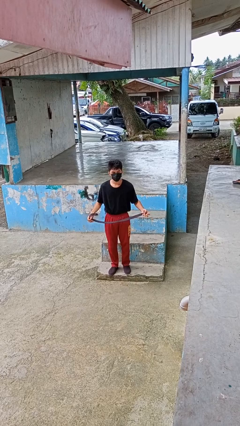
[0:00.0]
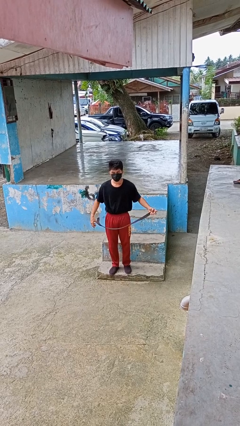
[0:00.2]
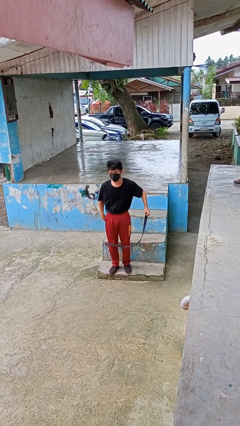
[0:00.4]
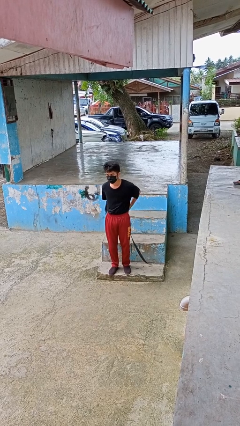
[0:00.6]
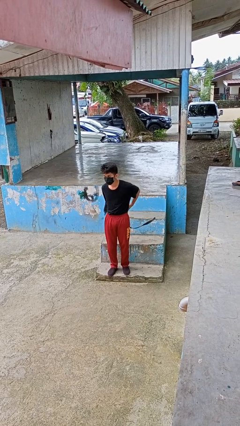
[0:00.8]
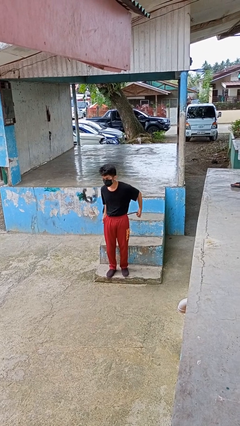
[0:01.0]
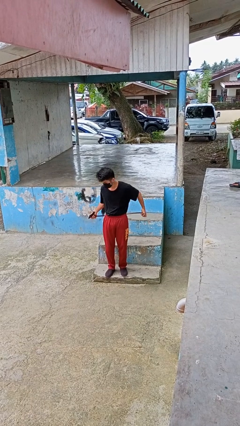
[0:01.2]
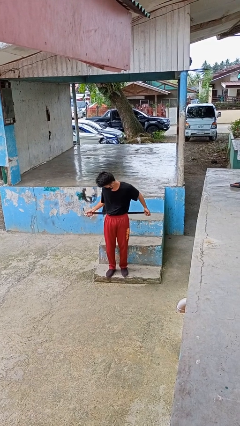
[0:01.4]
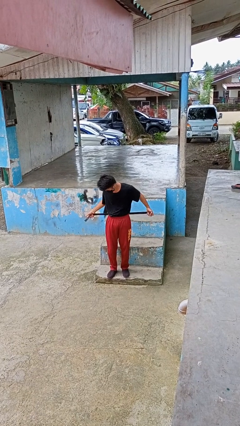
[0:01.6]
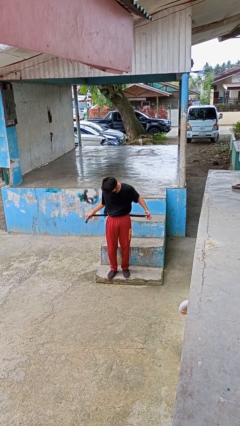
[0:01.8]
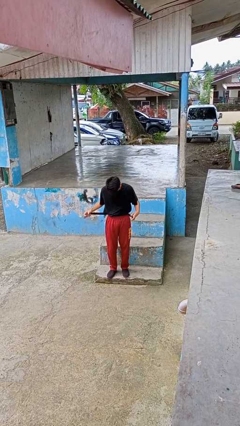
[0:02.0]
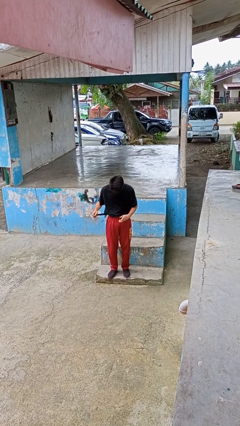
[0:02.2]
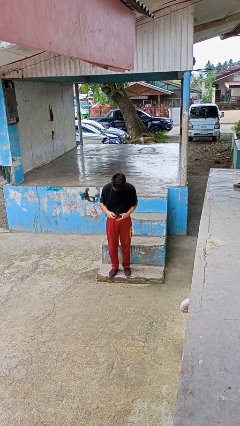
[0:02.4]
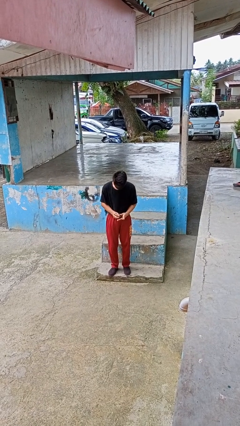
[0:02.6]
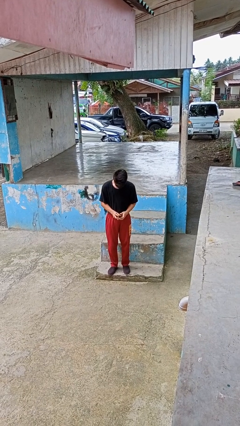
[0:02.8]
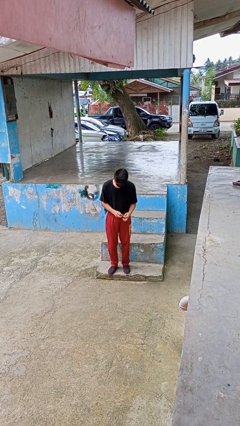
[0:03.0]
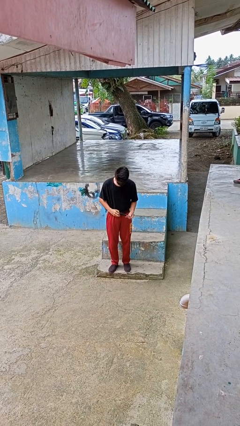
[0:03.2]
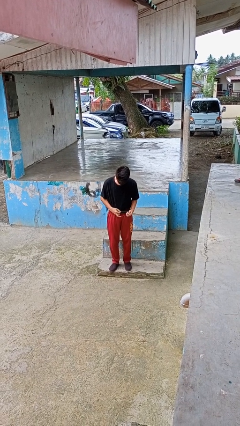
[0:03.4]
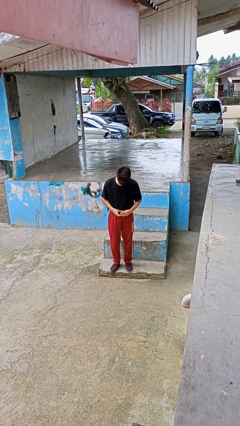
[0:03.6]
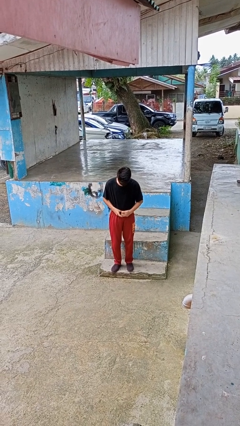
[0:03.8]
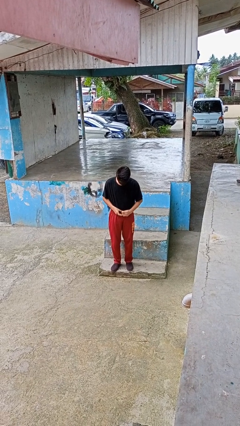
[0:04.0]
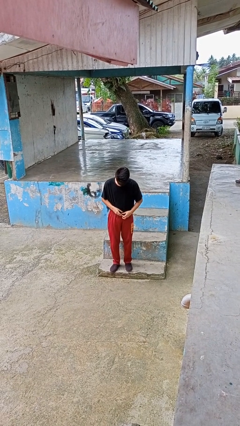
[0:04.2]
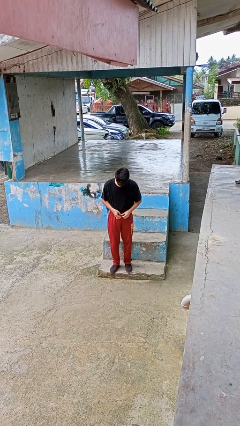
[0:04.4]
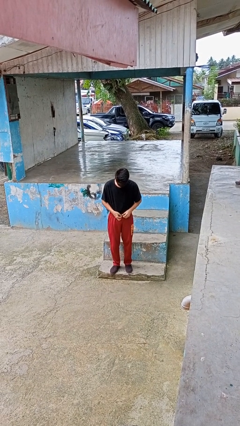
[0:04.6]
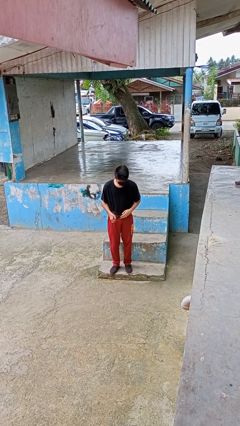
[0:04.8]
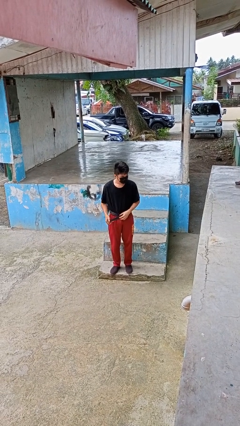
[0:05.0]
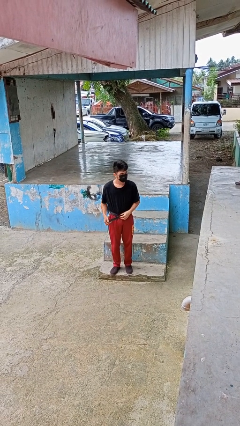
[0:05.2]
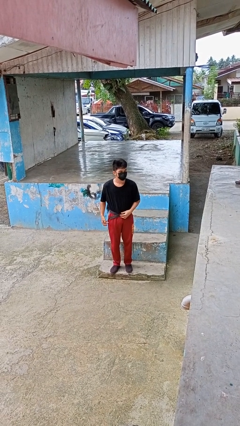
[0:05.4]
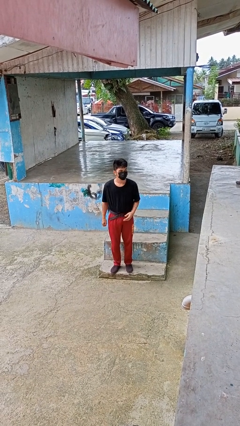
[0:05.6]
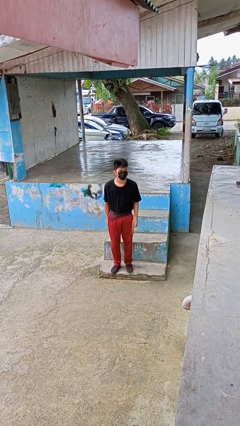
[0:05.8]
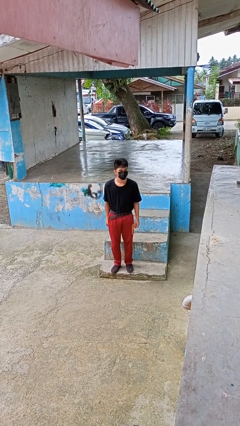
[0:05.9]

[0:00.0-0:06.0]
person puts on belt

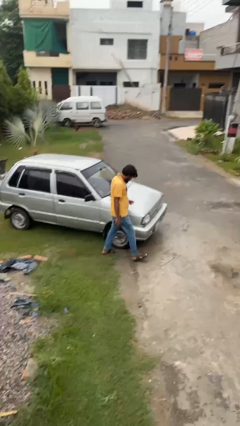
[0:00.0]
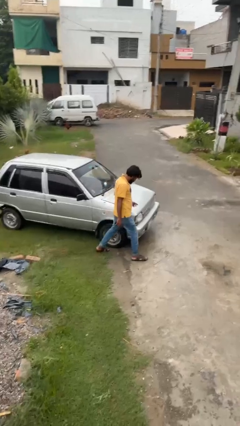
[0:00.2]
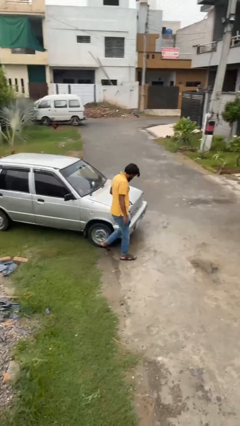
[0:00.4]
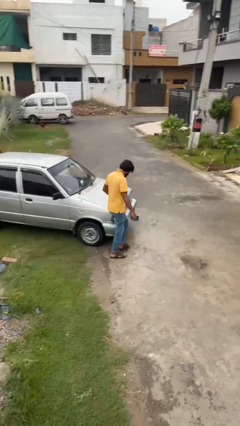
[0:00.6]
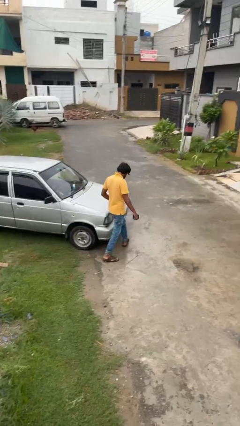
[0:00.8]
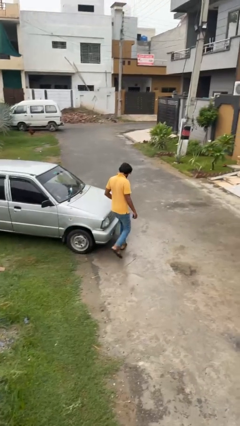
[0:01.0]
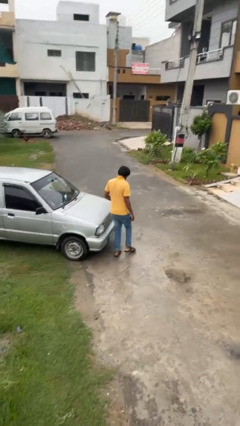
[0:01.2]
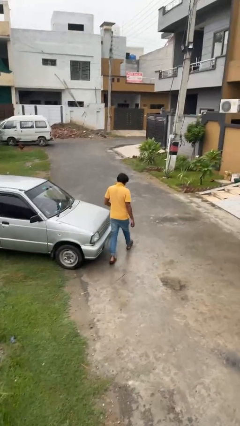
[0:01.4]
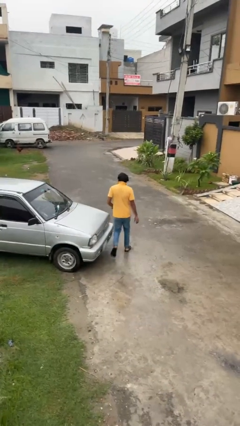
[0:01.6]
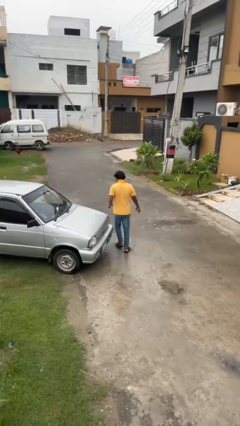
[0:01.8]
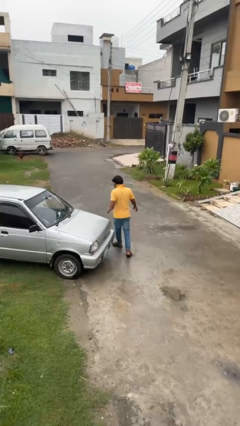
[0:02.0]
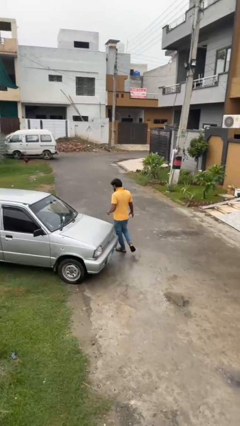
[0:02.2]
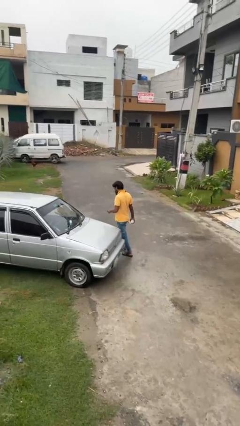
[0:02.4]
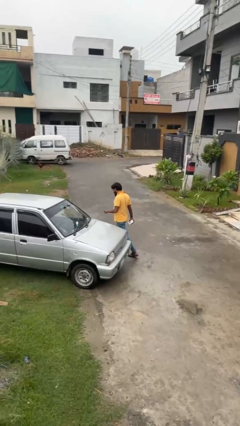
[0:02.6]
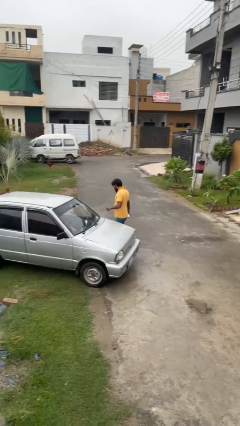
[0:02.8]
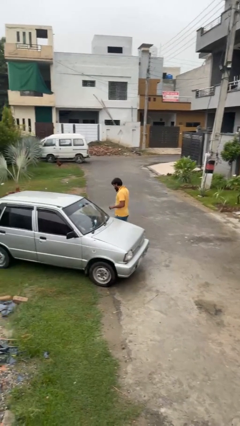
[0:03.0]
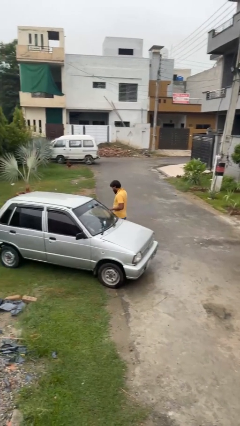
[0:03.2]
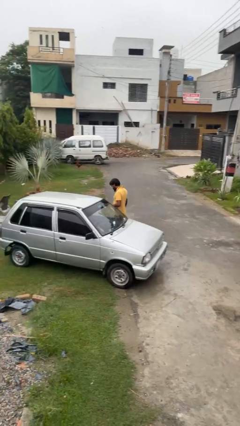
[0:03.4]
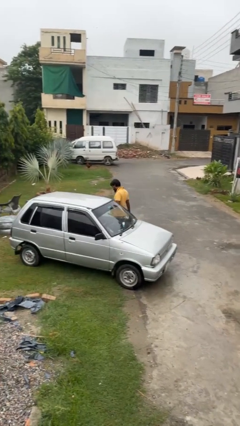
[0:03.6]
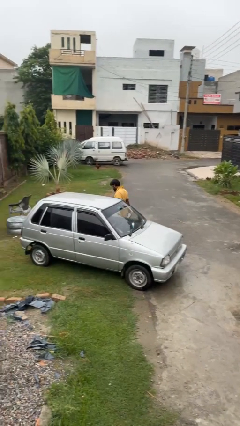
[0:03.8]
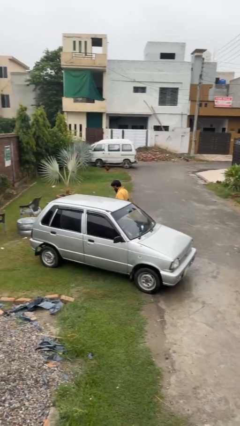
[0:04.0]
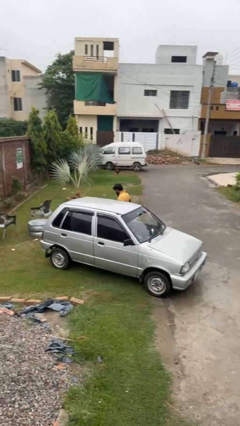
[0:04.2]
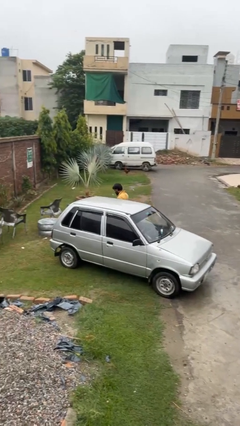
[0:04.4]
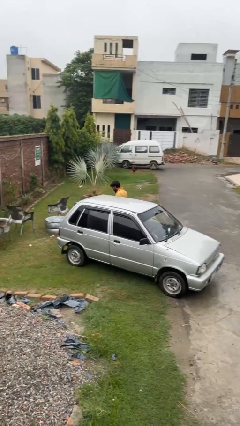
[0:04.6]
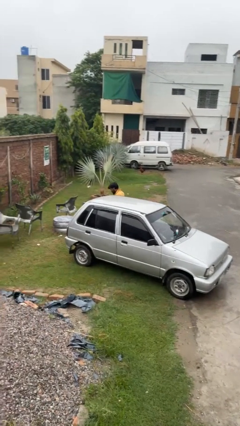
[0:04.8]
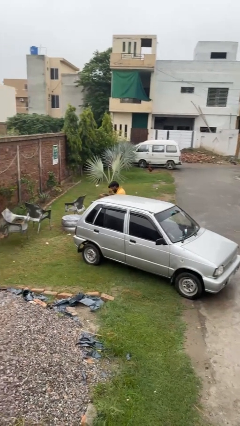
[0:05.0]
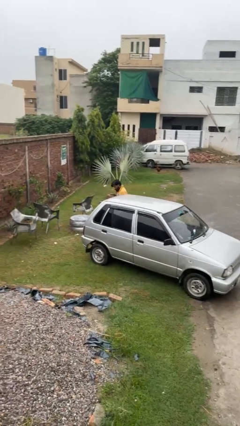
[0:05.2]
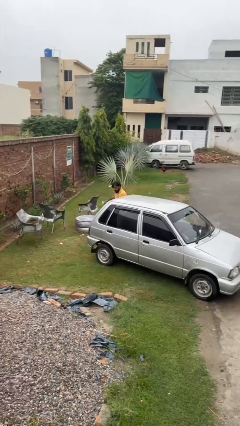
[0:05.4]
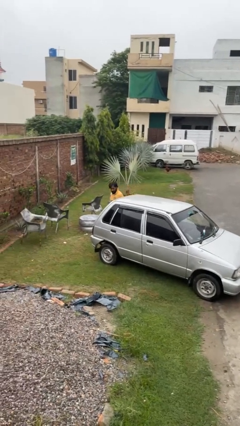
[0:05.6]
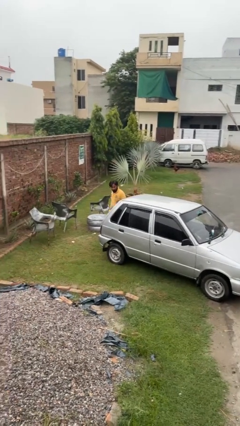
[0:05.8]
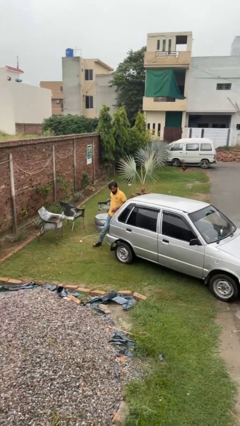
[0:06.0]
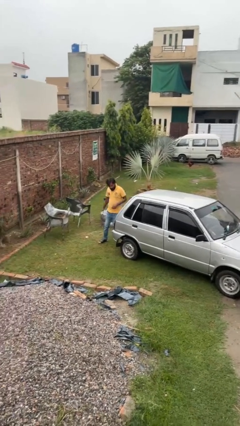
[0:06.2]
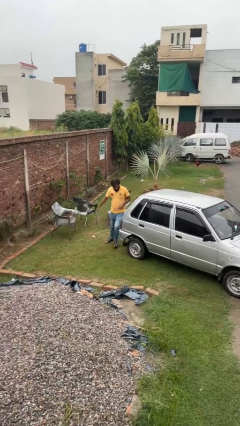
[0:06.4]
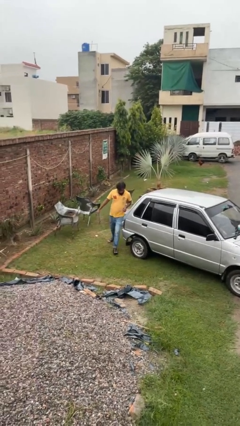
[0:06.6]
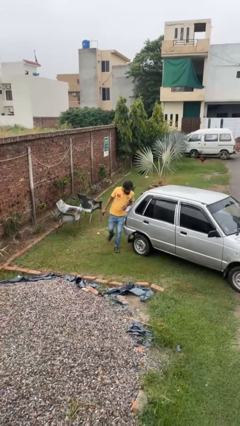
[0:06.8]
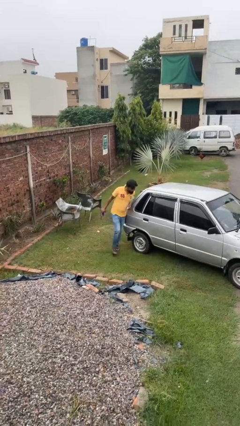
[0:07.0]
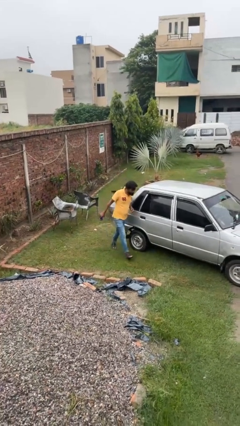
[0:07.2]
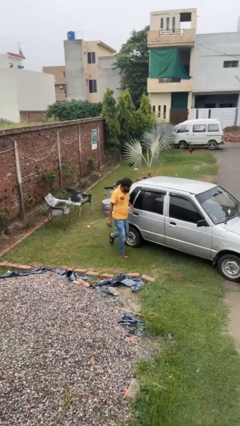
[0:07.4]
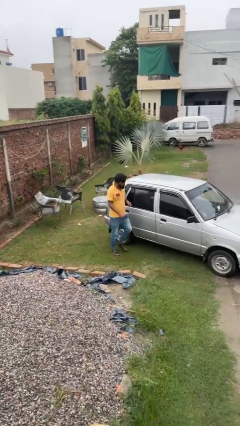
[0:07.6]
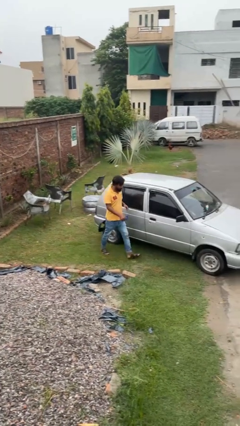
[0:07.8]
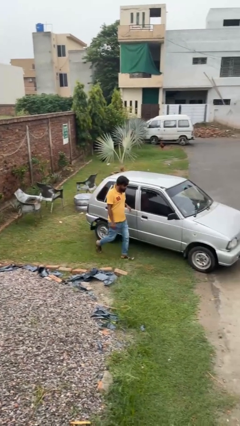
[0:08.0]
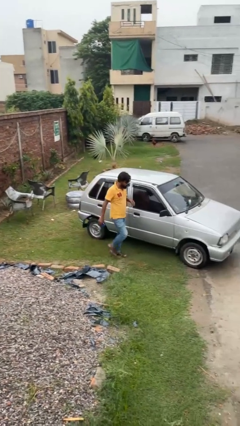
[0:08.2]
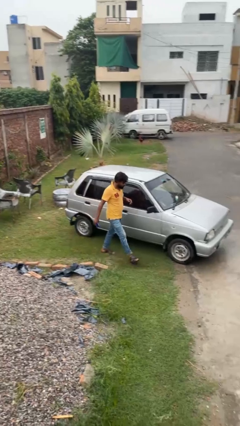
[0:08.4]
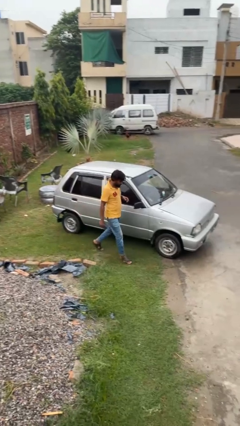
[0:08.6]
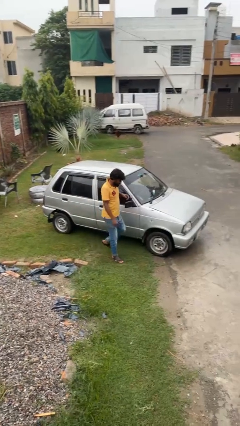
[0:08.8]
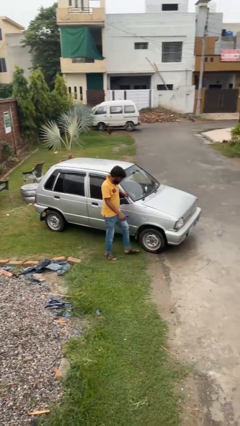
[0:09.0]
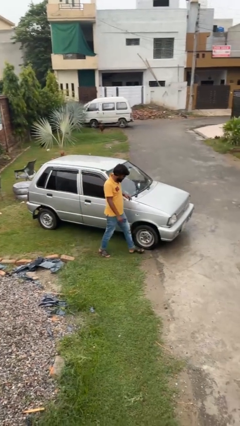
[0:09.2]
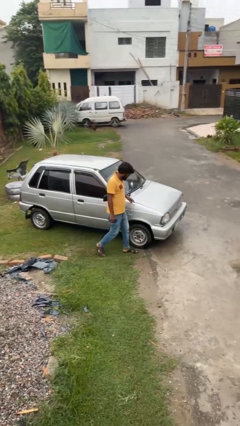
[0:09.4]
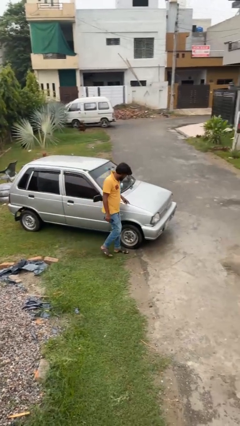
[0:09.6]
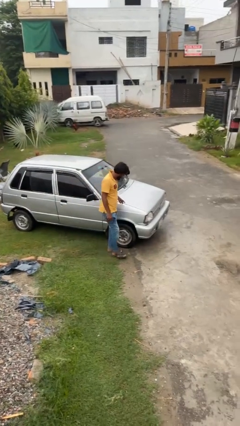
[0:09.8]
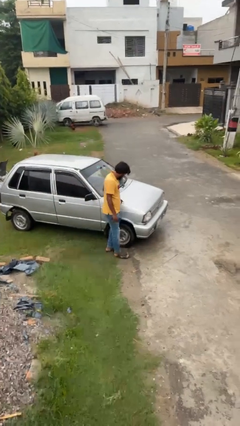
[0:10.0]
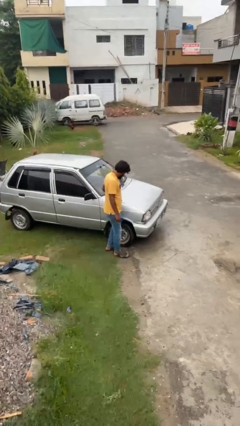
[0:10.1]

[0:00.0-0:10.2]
person walks around car

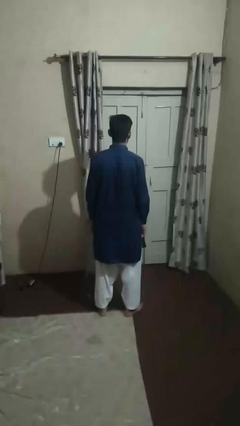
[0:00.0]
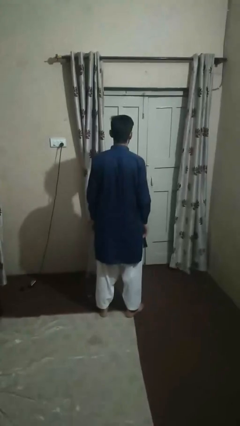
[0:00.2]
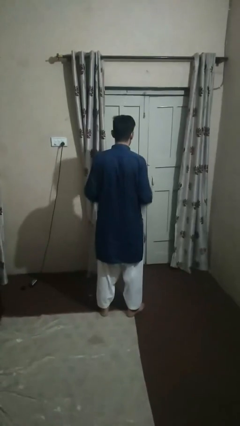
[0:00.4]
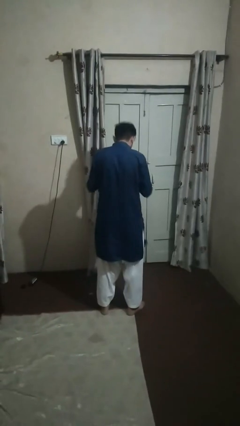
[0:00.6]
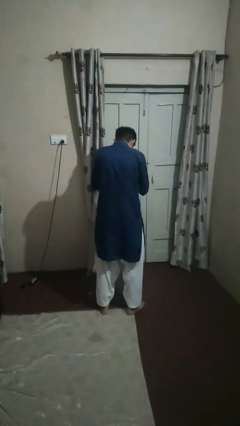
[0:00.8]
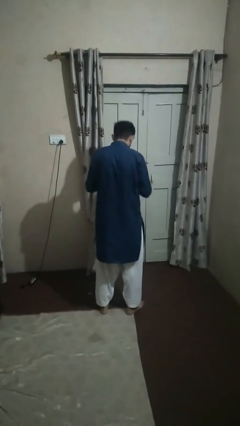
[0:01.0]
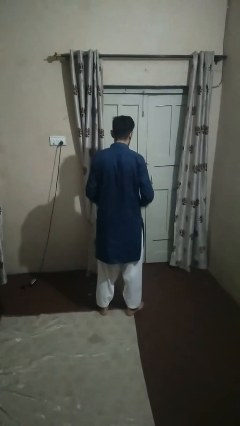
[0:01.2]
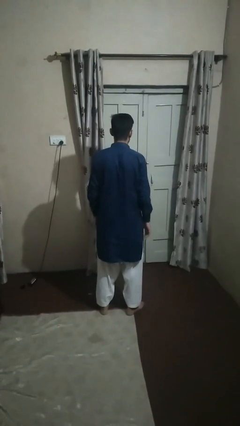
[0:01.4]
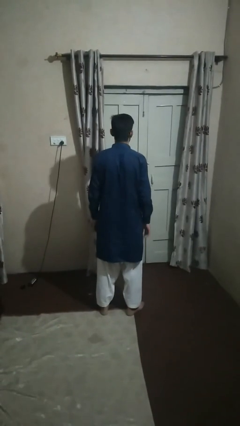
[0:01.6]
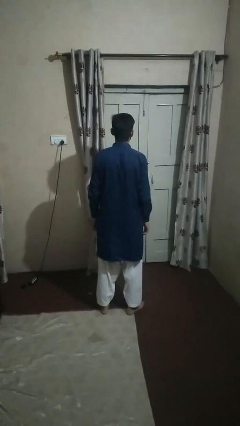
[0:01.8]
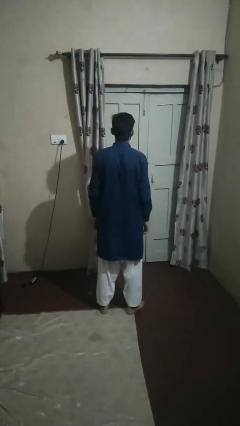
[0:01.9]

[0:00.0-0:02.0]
person sneezes into hand
